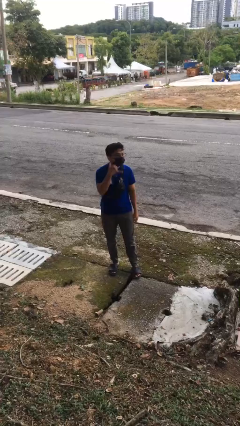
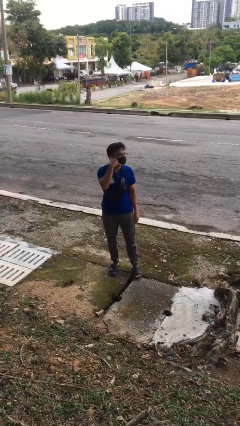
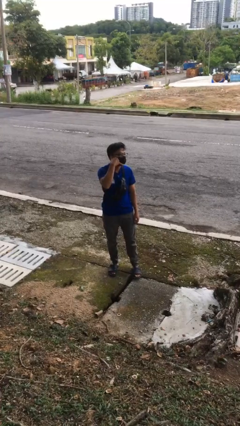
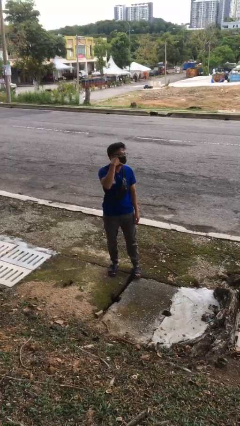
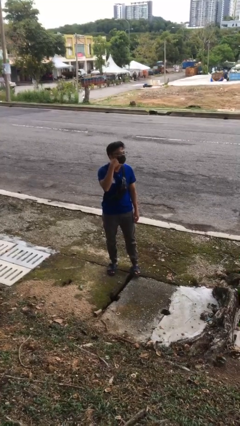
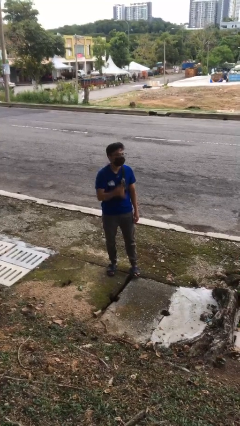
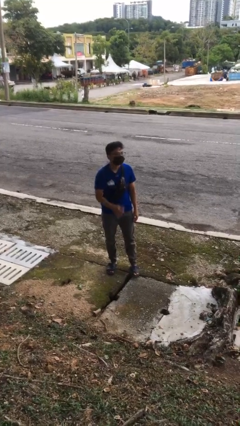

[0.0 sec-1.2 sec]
person gestures call me

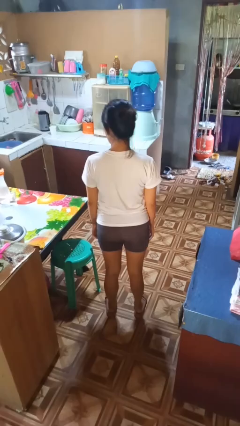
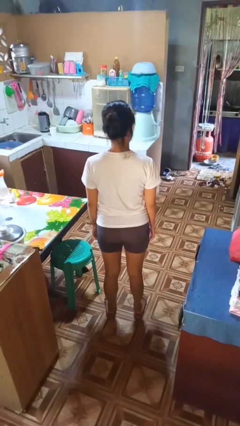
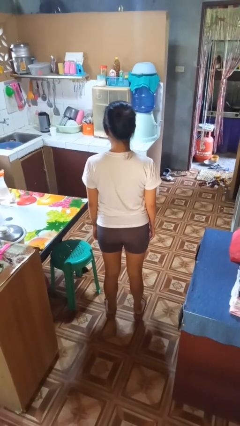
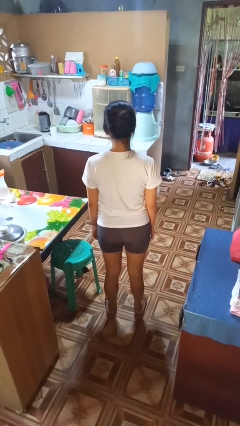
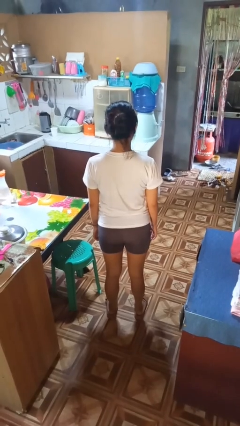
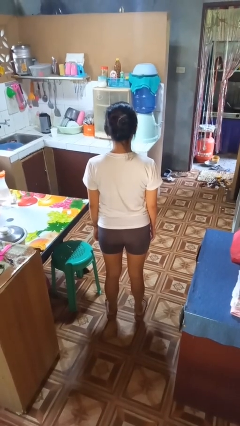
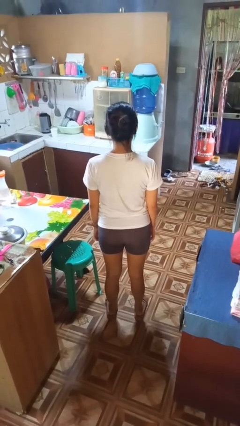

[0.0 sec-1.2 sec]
person shakes head

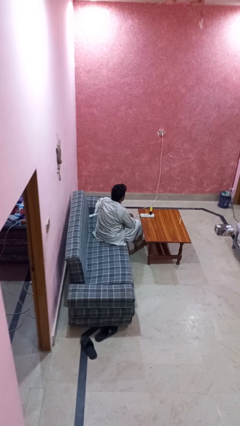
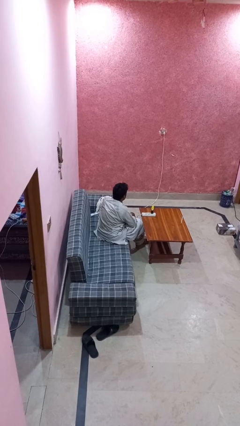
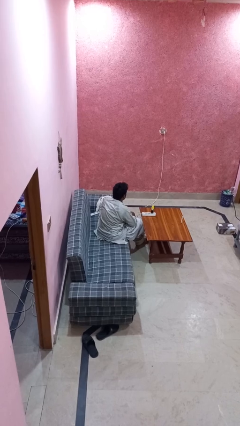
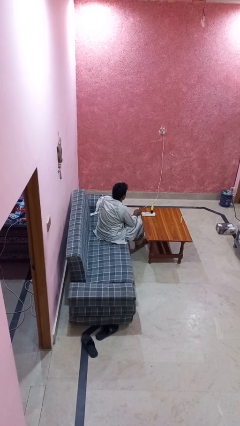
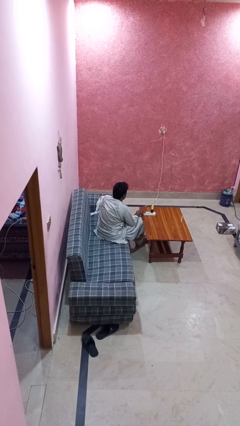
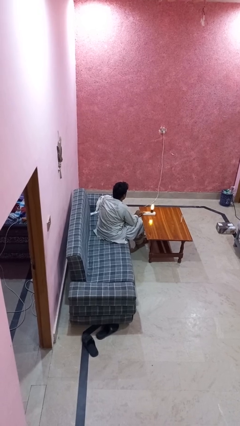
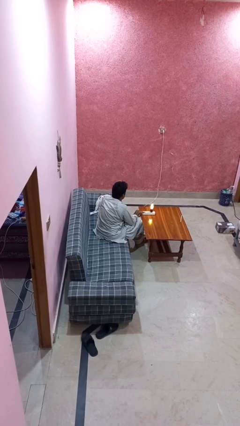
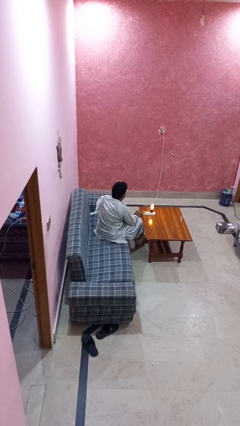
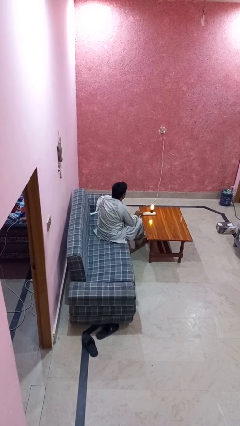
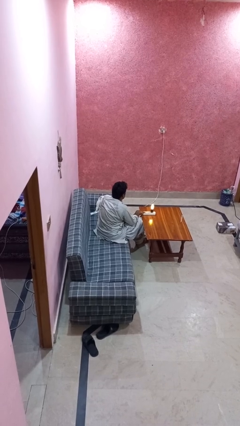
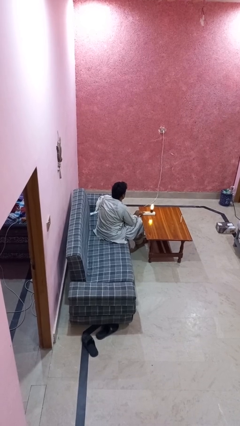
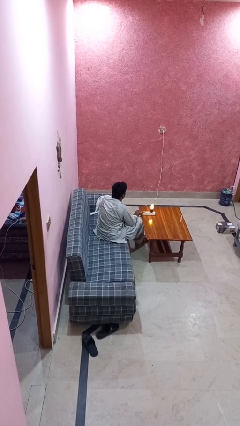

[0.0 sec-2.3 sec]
person turns on lamp

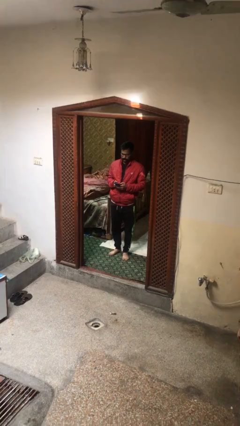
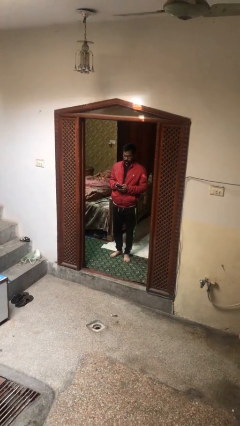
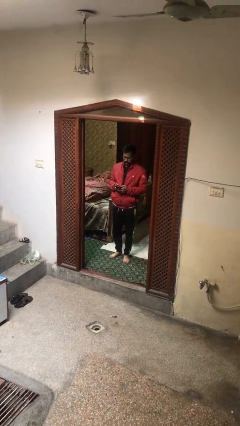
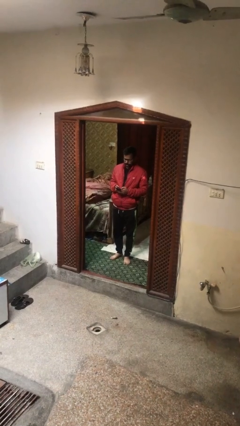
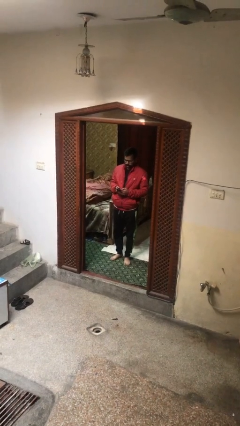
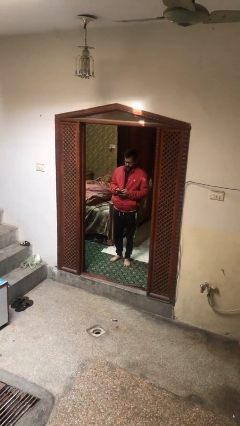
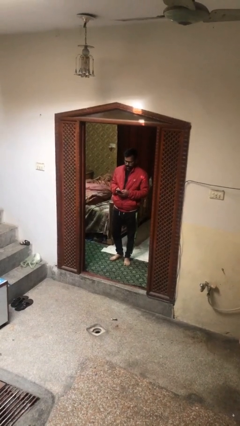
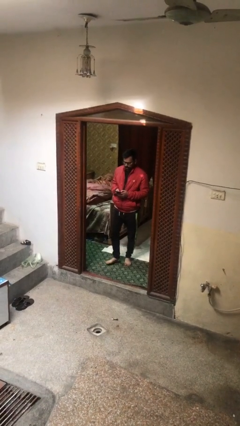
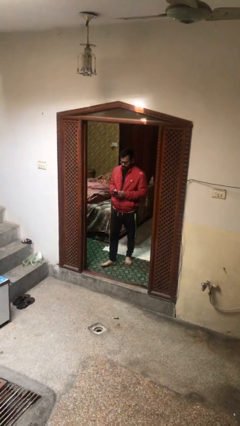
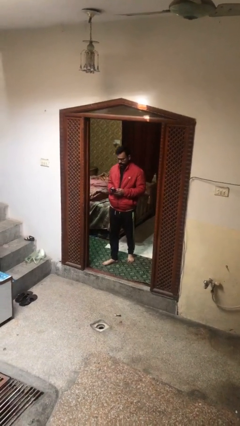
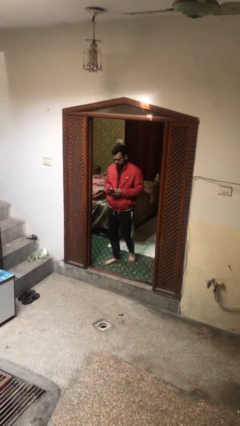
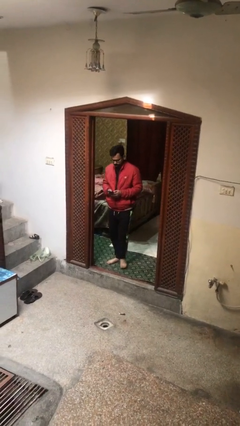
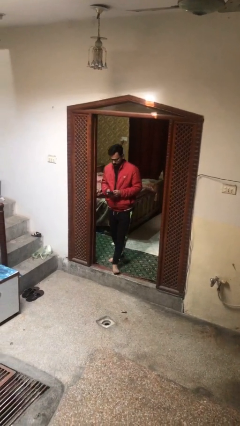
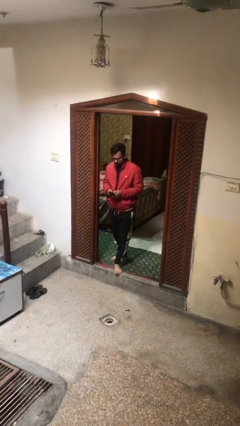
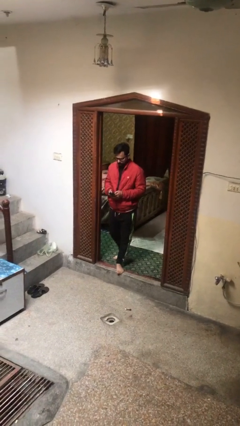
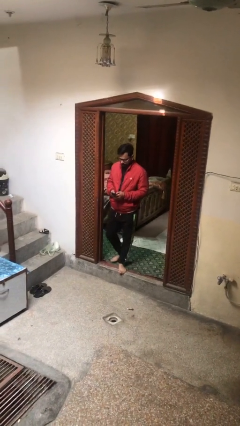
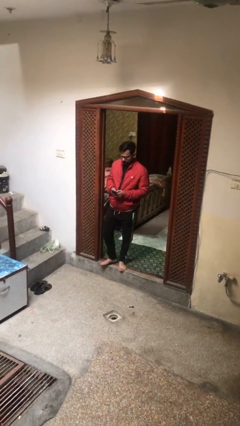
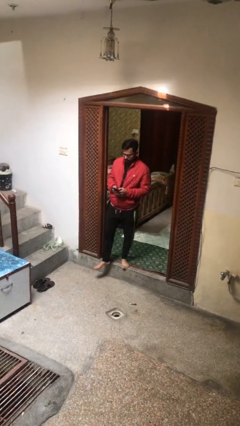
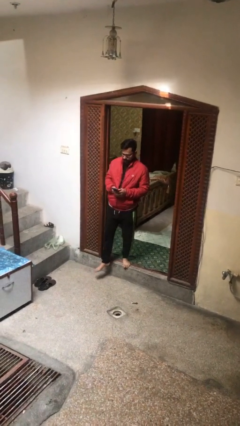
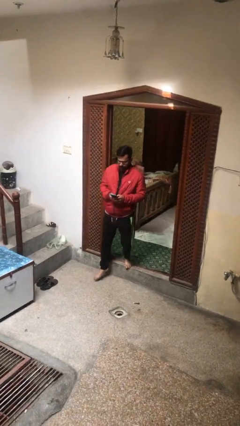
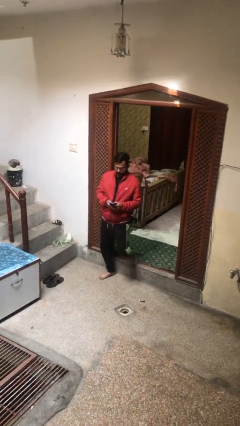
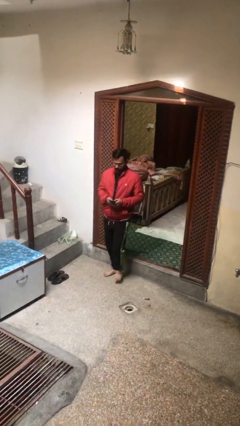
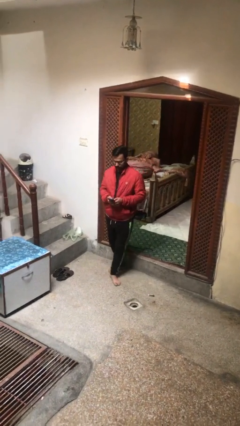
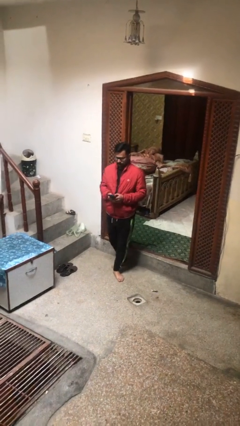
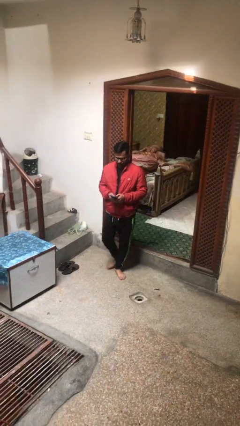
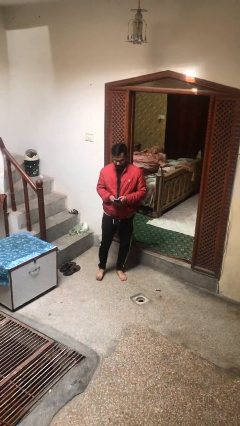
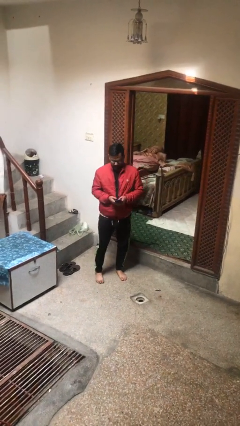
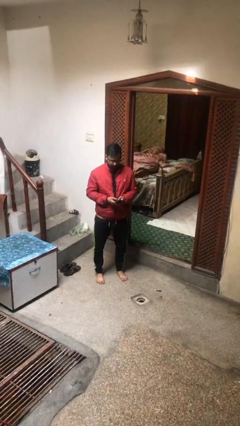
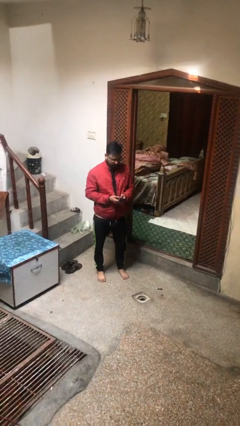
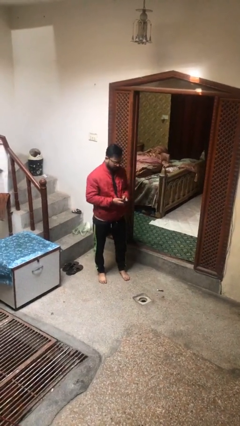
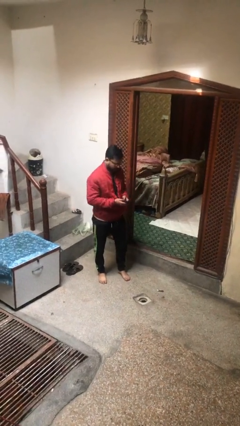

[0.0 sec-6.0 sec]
person enters scene through structure

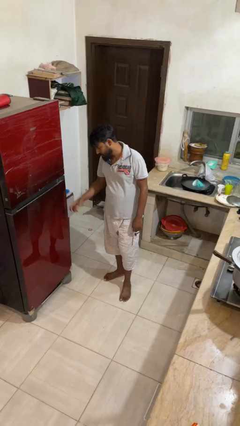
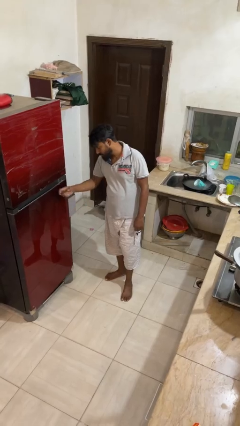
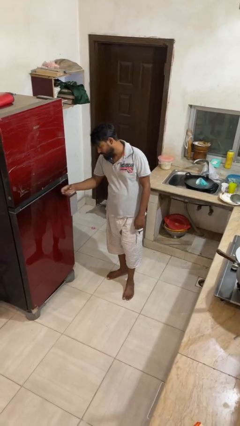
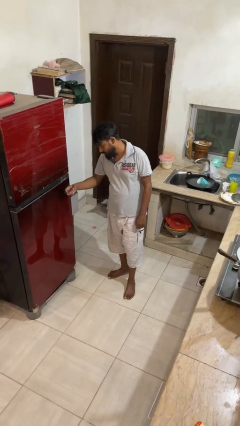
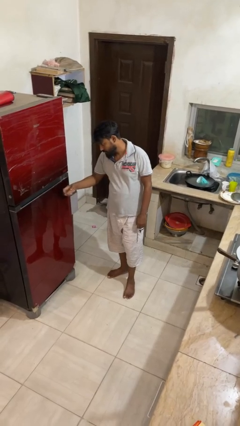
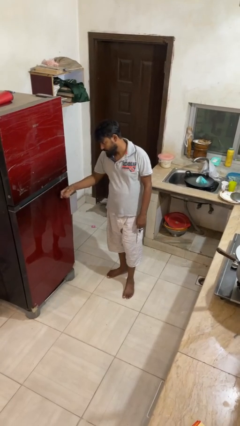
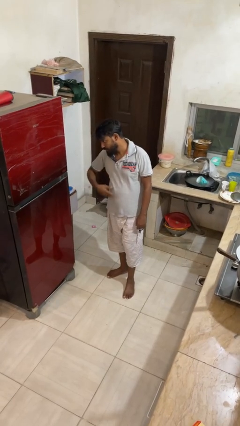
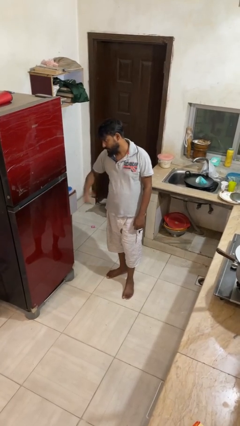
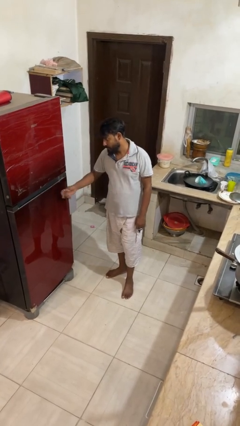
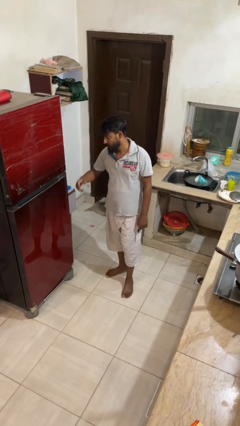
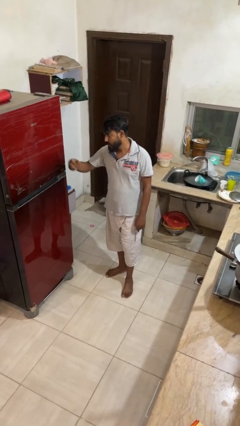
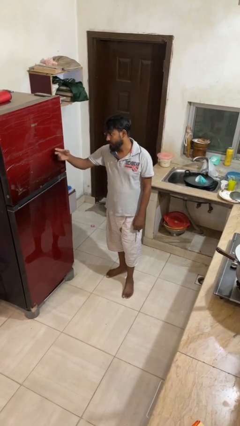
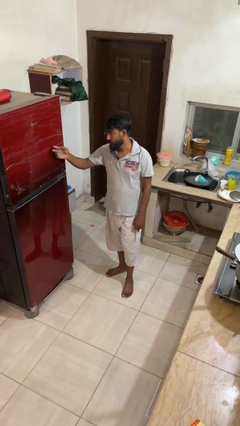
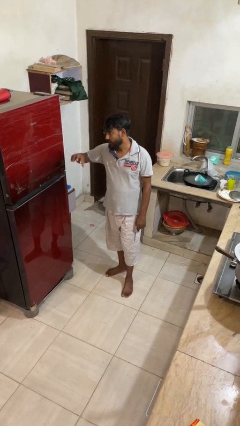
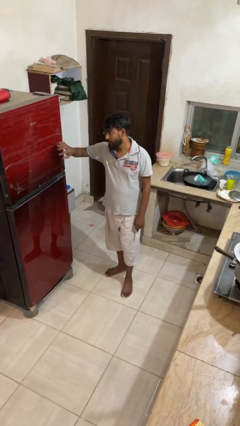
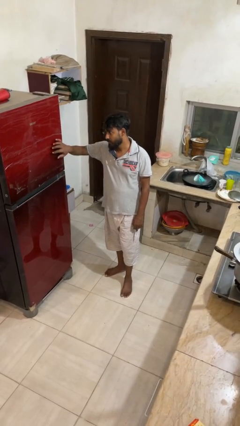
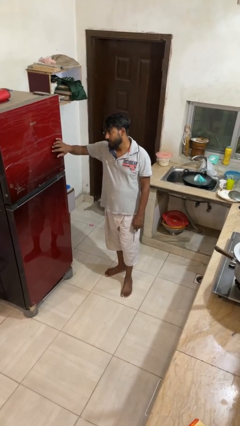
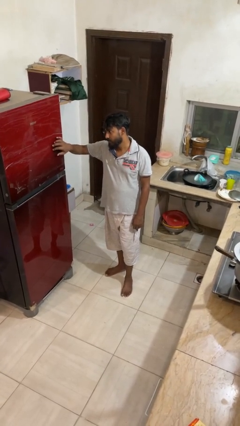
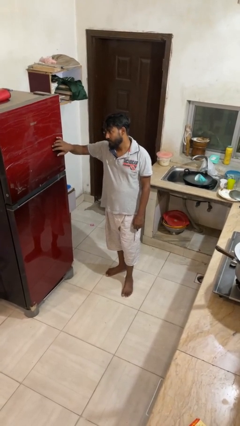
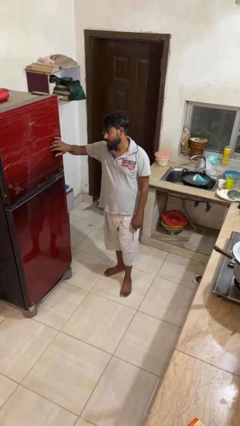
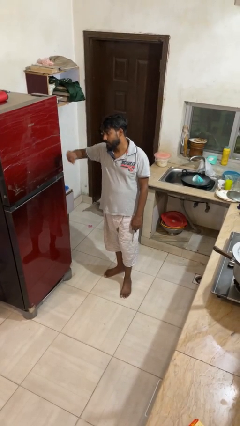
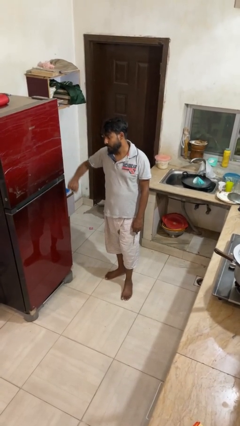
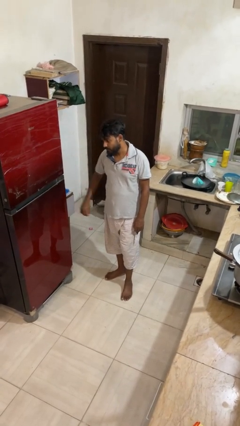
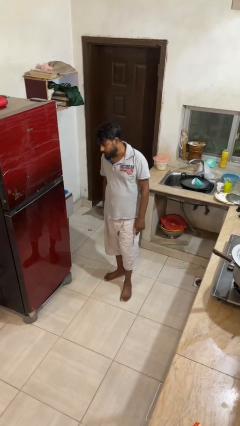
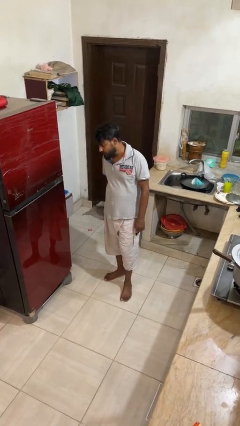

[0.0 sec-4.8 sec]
person taps object with finger

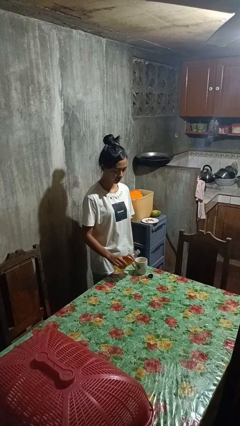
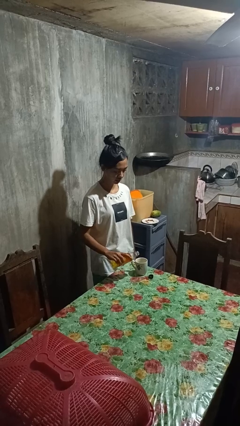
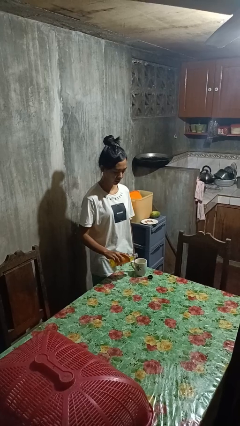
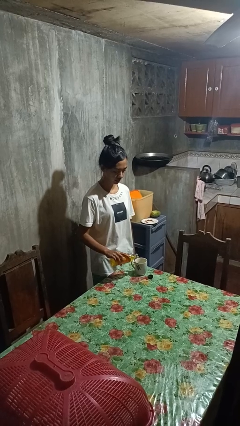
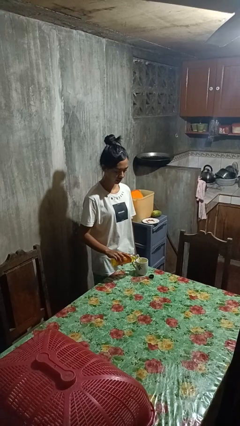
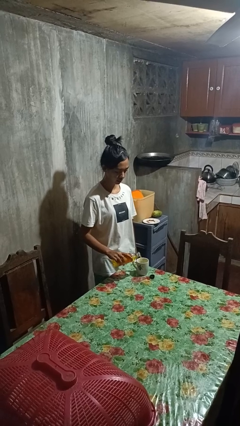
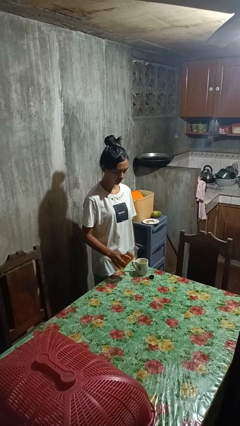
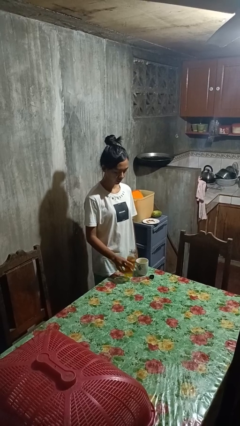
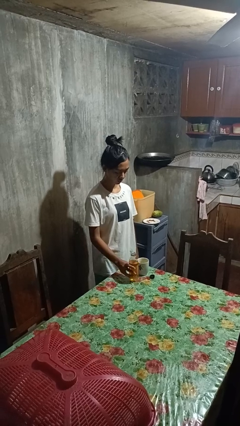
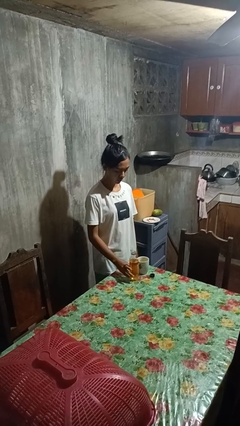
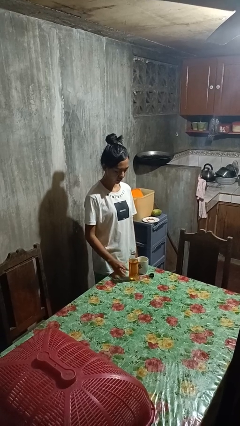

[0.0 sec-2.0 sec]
person pours liquid into cup
